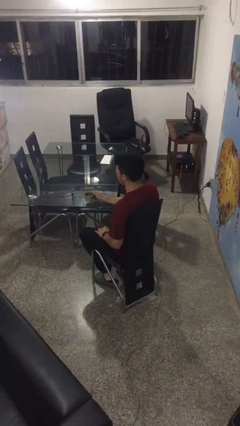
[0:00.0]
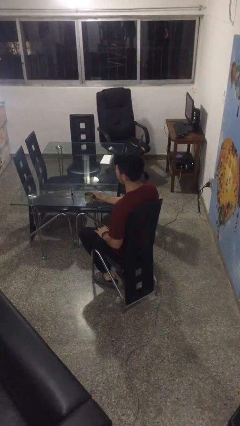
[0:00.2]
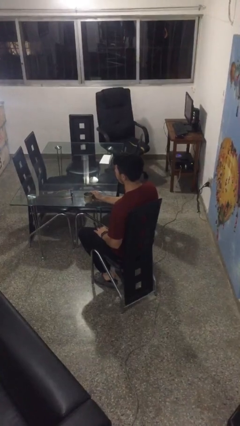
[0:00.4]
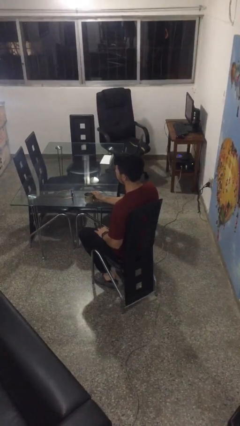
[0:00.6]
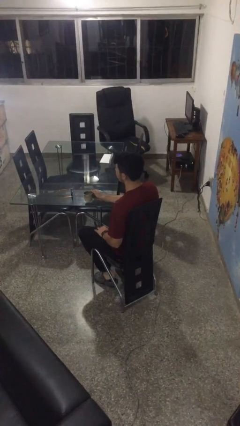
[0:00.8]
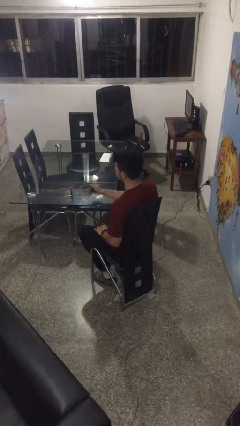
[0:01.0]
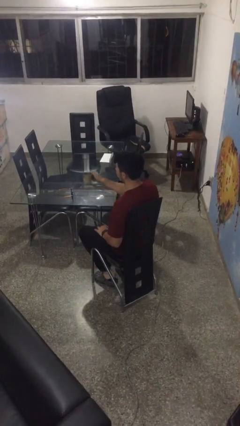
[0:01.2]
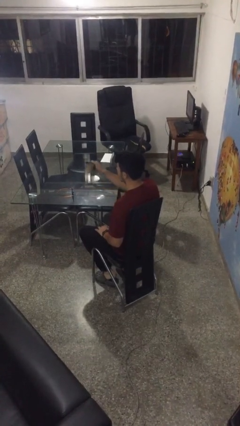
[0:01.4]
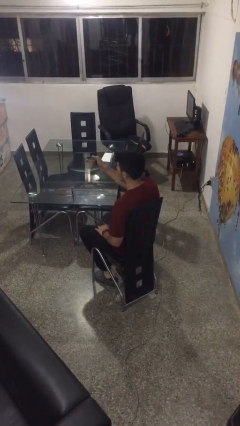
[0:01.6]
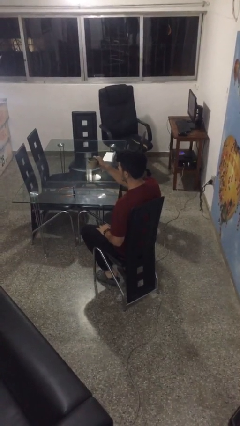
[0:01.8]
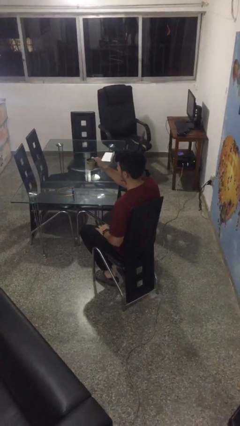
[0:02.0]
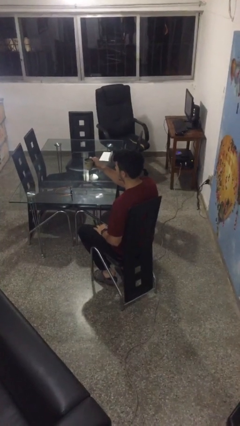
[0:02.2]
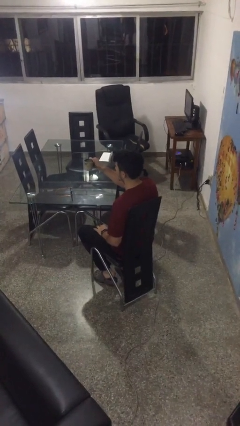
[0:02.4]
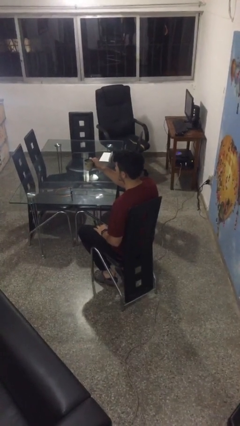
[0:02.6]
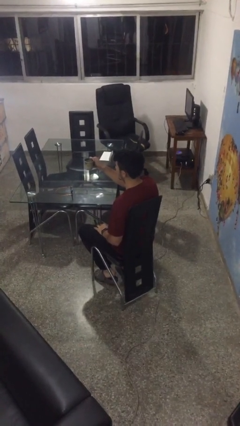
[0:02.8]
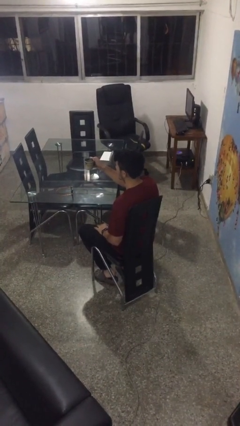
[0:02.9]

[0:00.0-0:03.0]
person picks up object from table

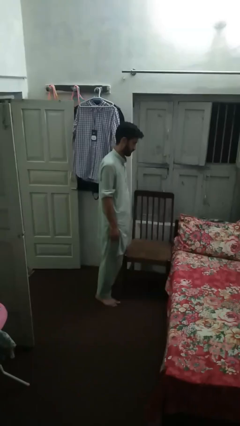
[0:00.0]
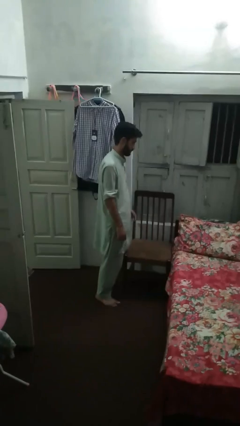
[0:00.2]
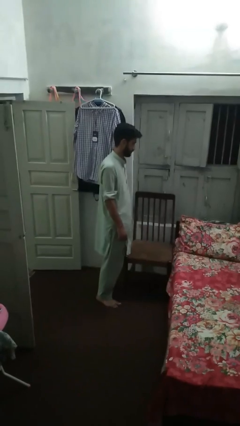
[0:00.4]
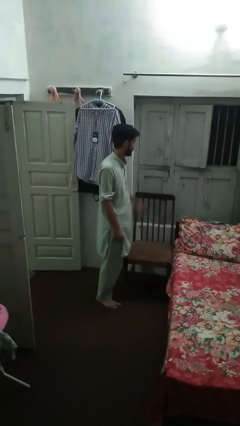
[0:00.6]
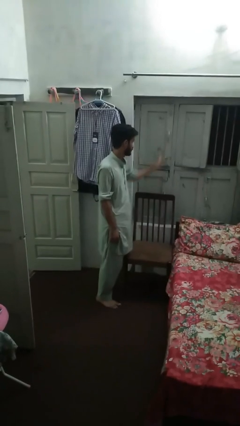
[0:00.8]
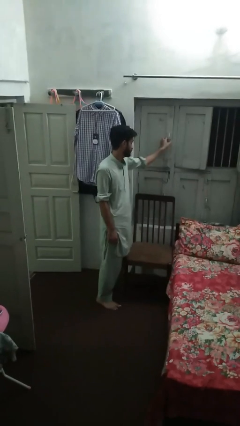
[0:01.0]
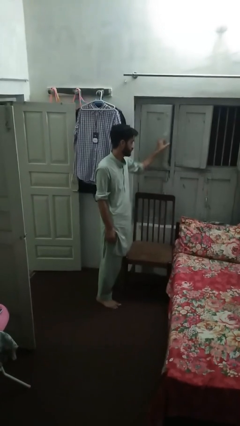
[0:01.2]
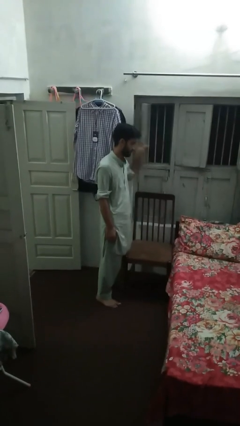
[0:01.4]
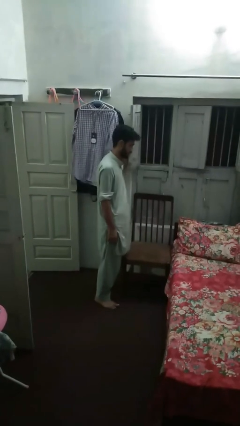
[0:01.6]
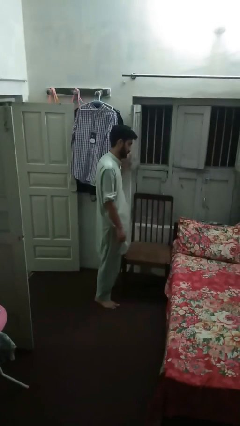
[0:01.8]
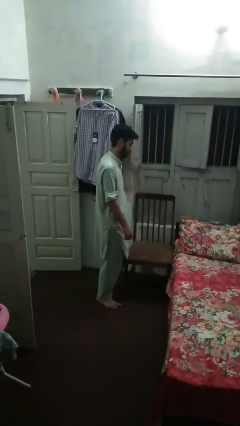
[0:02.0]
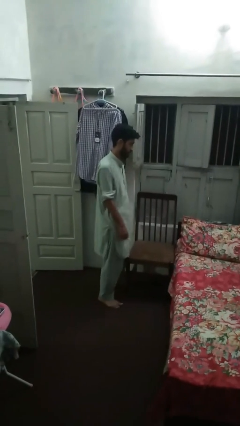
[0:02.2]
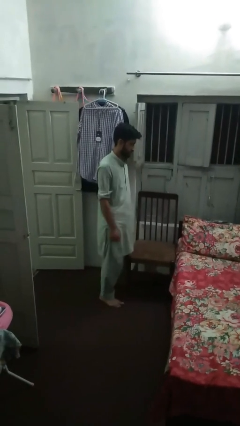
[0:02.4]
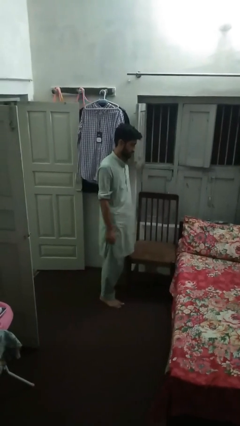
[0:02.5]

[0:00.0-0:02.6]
person opens home window

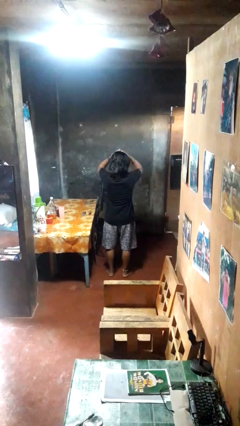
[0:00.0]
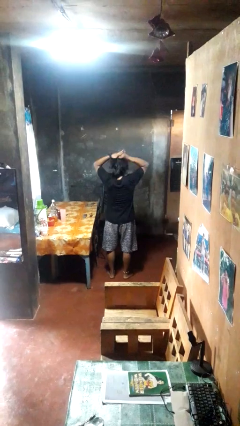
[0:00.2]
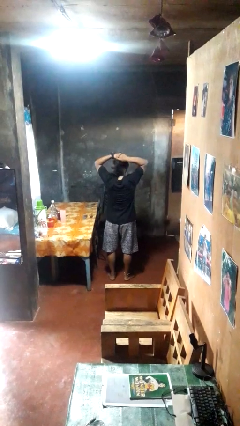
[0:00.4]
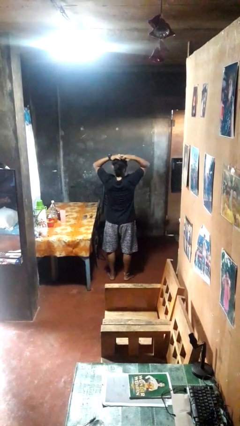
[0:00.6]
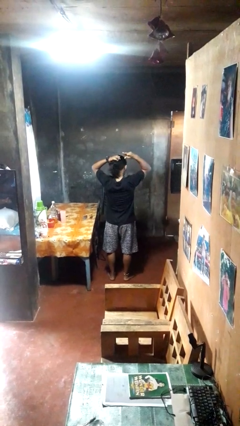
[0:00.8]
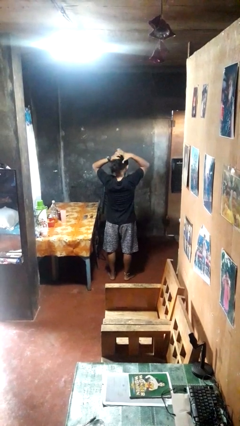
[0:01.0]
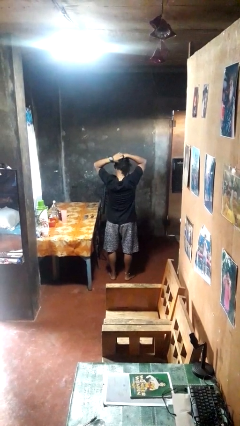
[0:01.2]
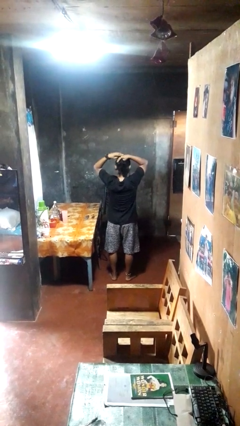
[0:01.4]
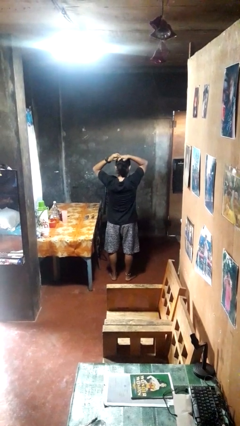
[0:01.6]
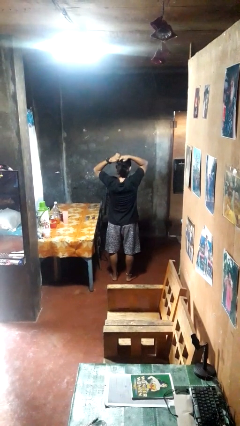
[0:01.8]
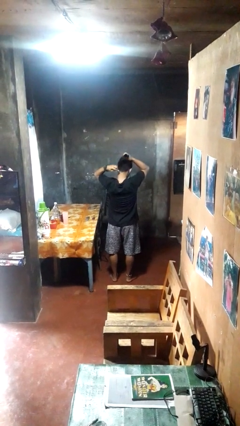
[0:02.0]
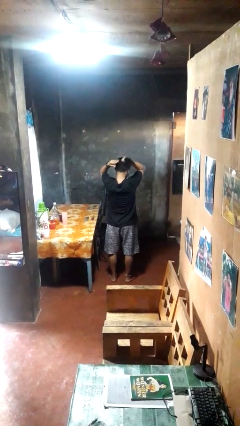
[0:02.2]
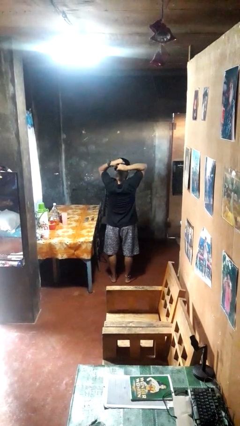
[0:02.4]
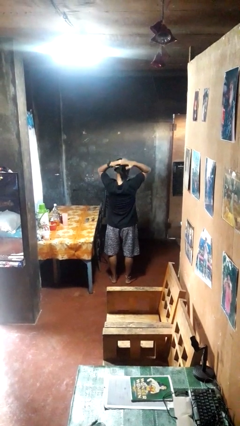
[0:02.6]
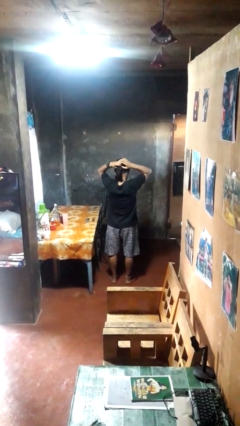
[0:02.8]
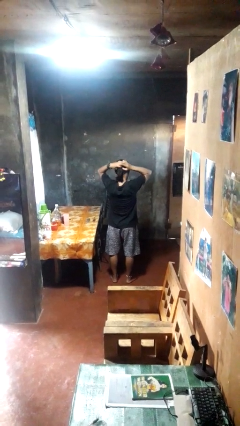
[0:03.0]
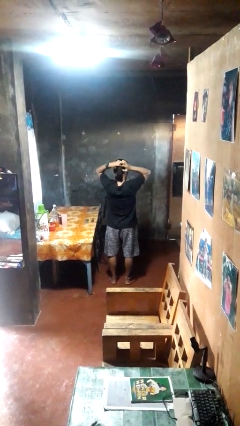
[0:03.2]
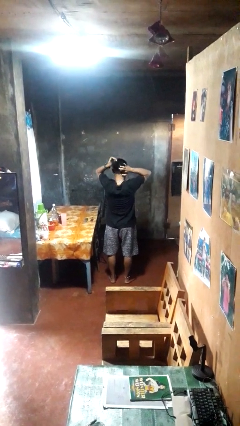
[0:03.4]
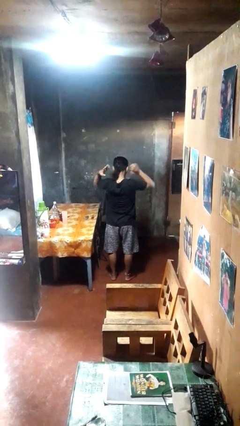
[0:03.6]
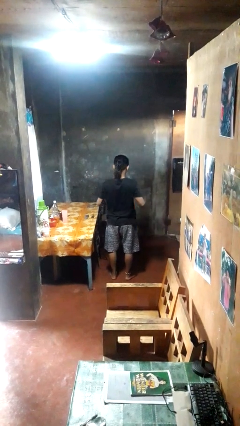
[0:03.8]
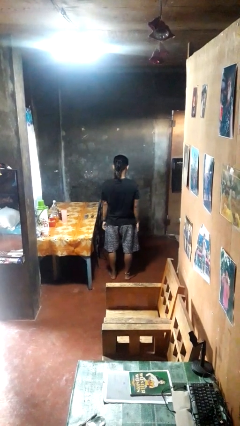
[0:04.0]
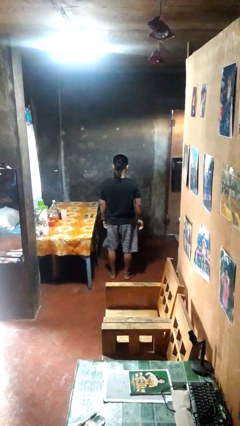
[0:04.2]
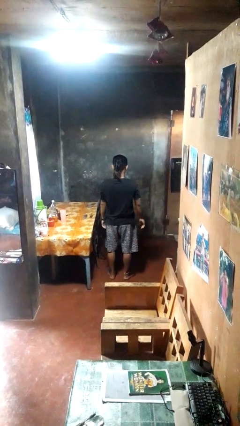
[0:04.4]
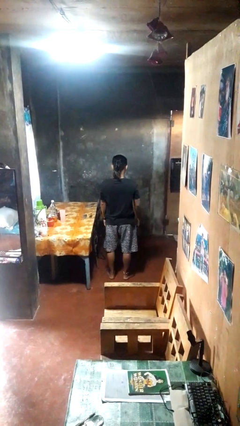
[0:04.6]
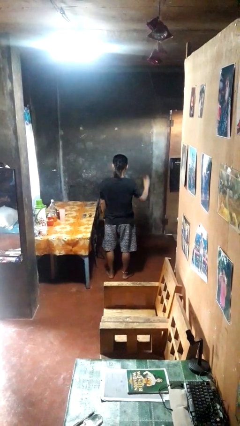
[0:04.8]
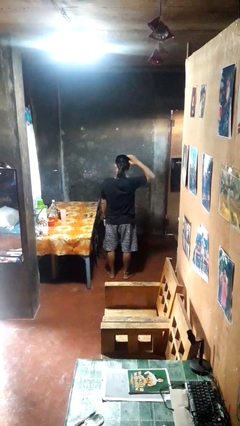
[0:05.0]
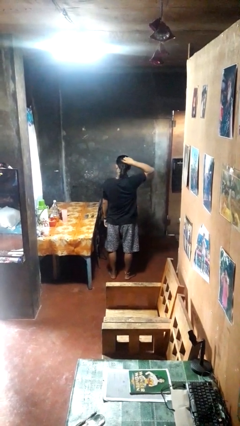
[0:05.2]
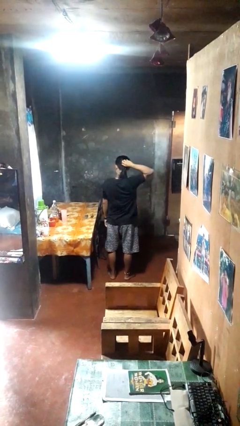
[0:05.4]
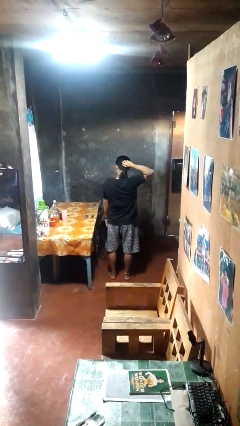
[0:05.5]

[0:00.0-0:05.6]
person puts hair in ponytail

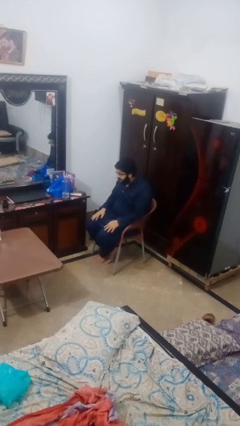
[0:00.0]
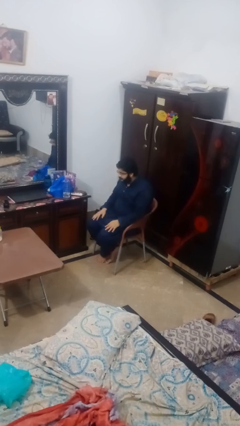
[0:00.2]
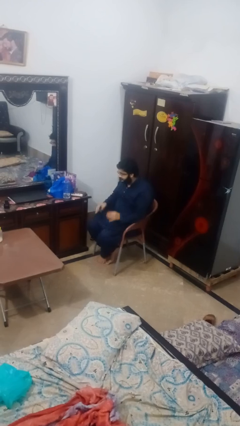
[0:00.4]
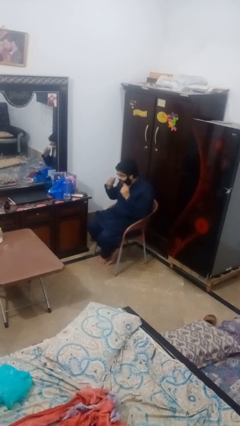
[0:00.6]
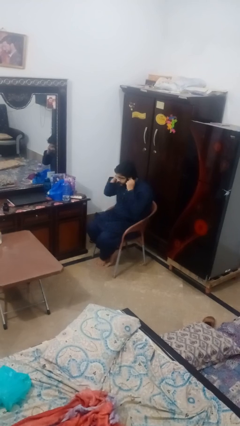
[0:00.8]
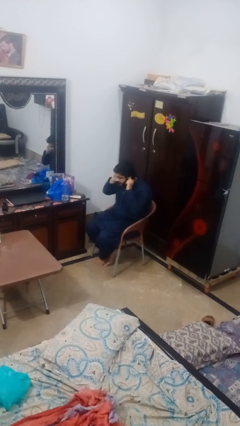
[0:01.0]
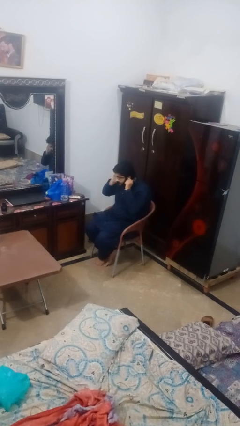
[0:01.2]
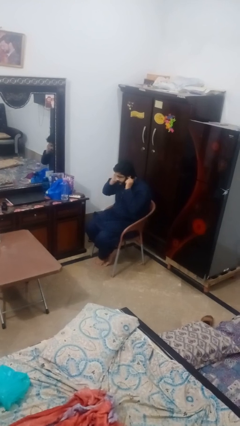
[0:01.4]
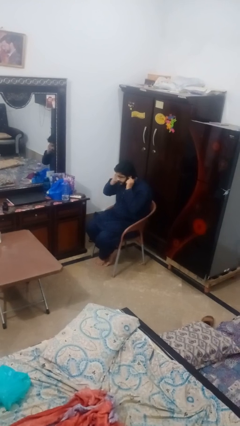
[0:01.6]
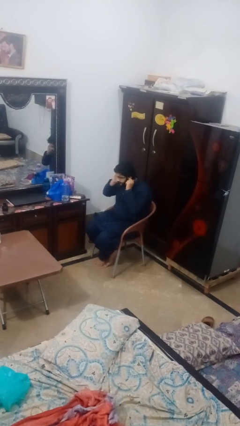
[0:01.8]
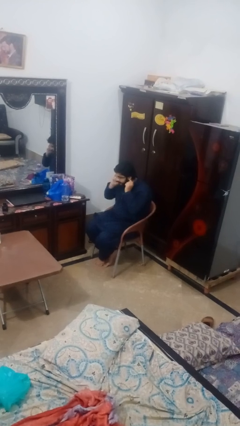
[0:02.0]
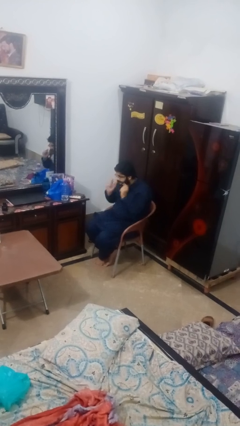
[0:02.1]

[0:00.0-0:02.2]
person puts fingers in ear

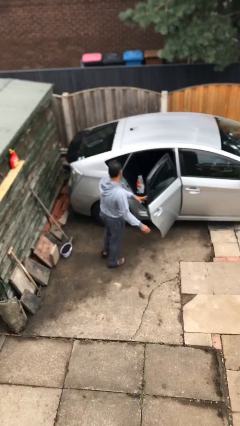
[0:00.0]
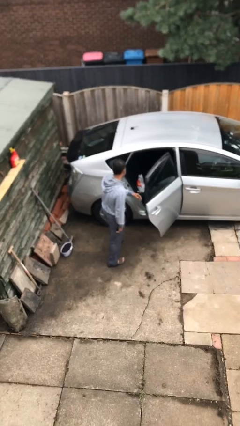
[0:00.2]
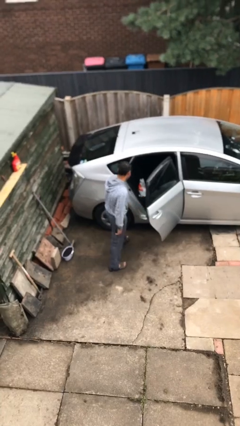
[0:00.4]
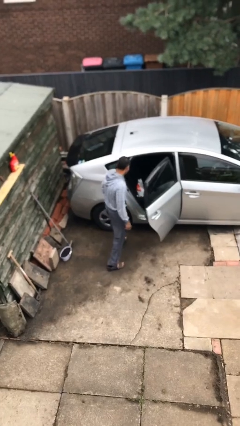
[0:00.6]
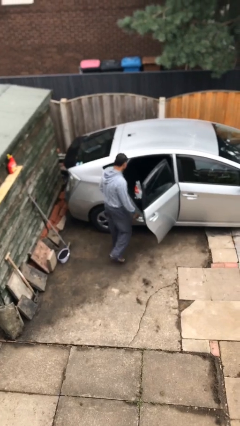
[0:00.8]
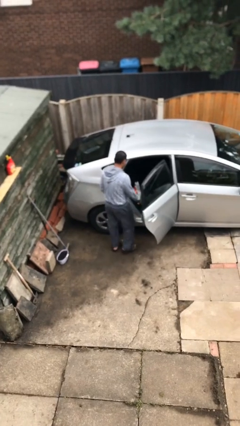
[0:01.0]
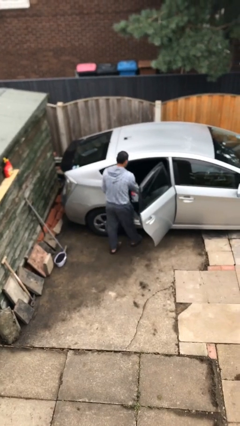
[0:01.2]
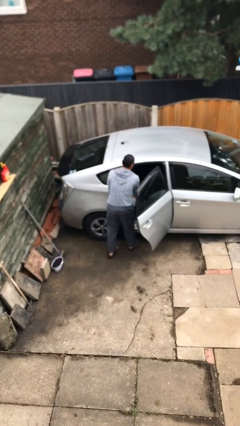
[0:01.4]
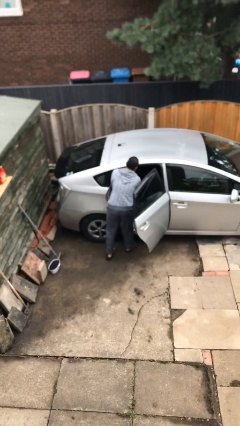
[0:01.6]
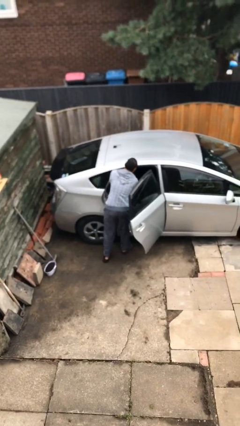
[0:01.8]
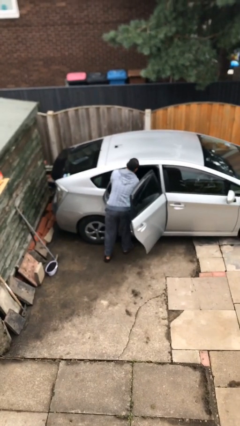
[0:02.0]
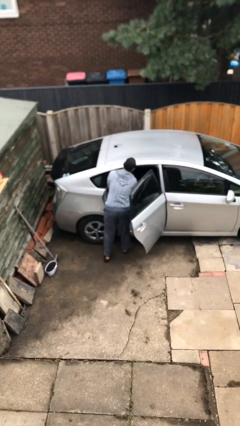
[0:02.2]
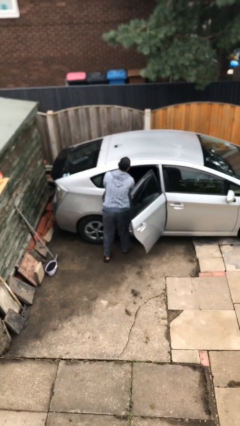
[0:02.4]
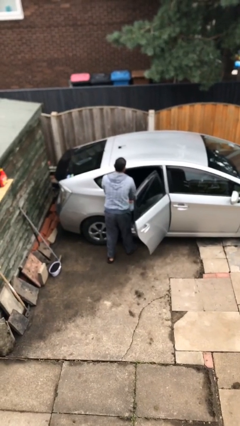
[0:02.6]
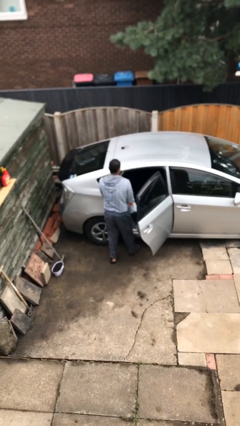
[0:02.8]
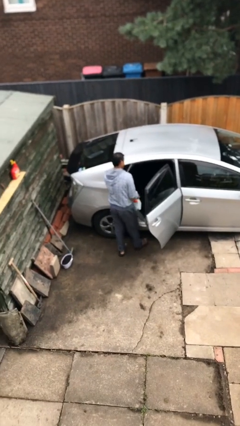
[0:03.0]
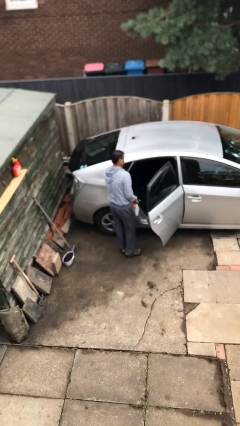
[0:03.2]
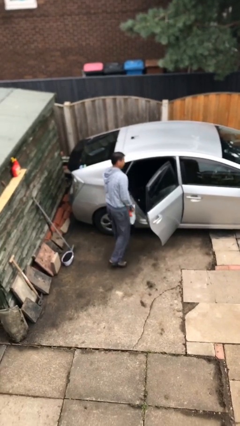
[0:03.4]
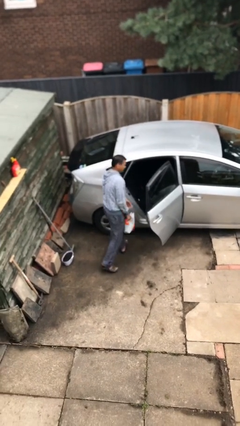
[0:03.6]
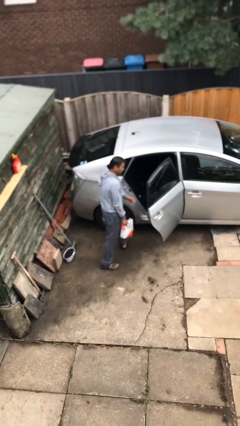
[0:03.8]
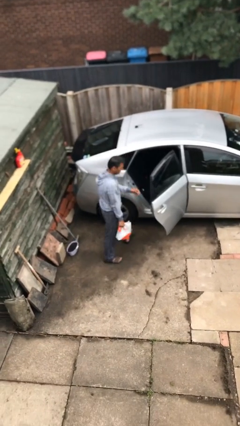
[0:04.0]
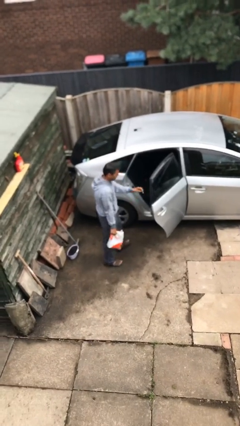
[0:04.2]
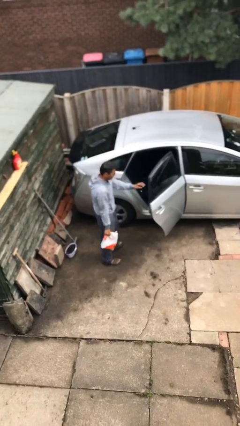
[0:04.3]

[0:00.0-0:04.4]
person unloads car
